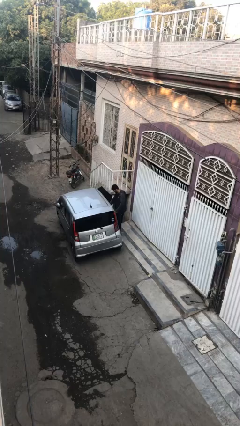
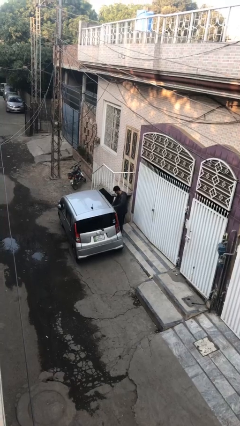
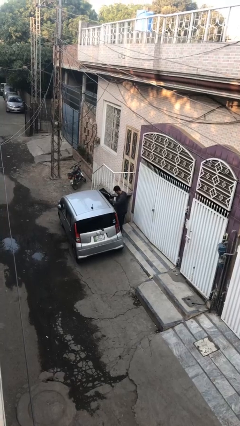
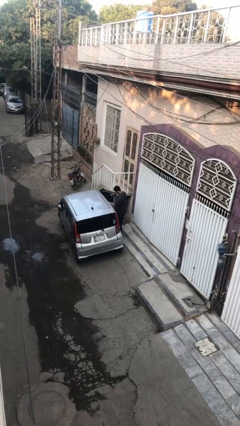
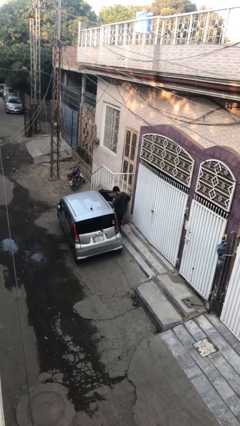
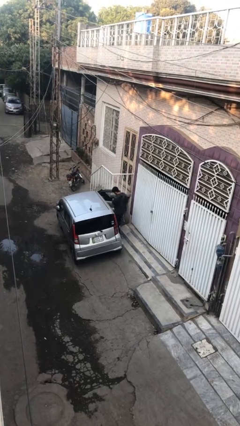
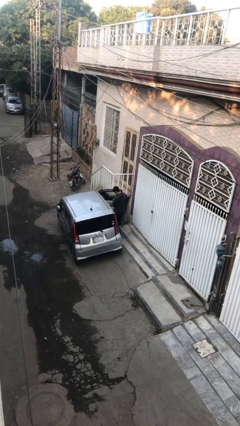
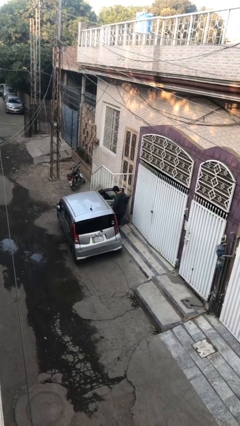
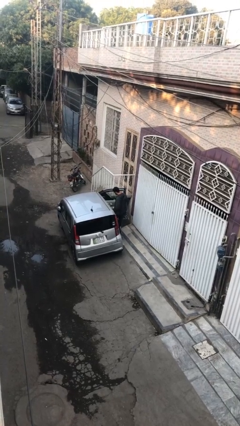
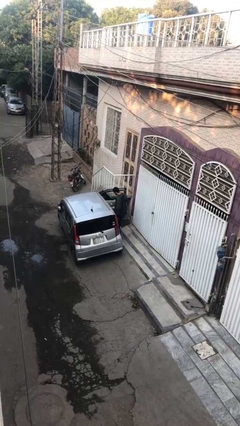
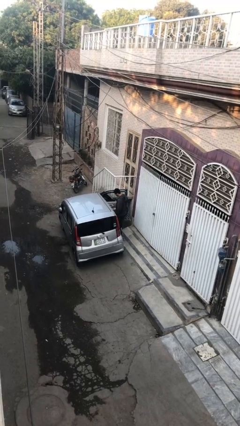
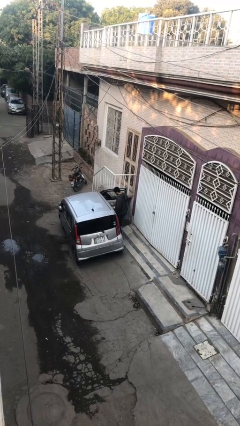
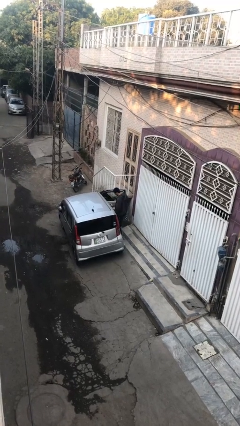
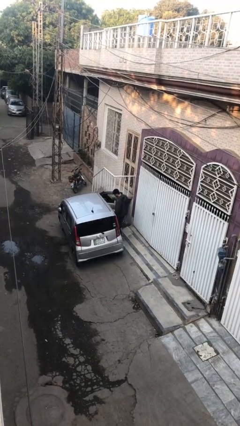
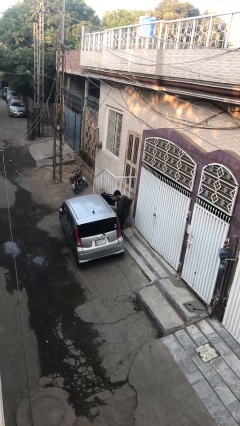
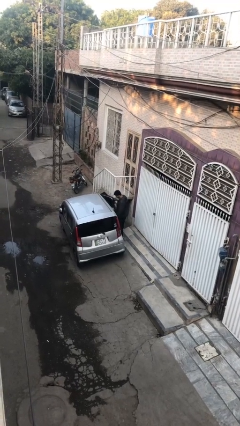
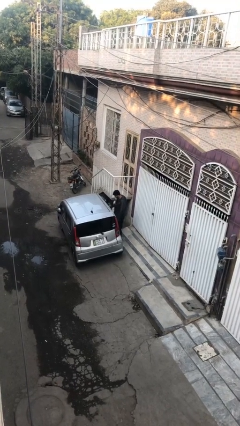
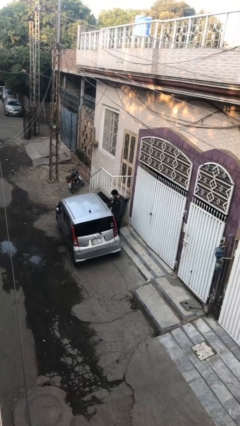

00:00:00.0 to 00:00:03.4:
person opens car door

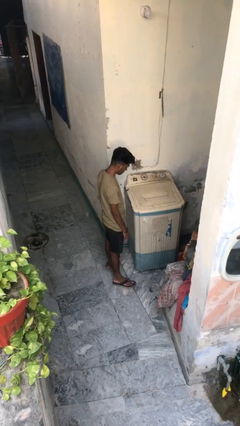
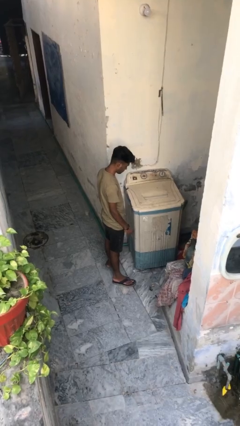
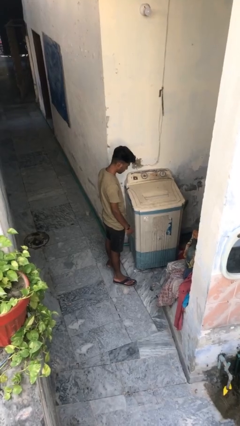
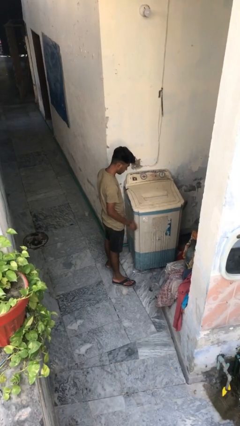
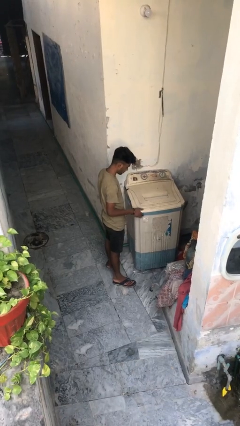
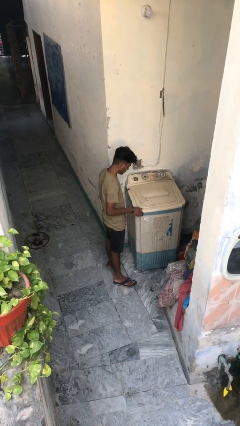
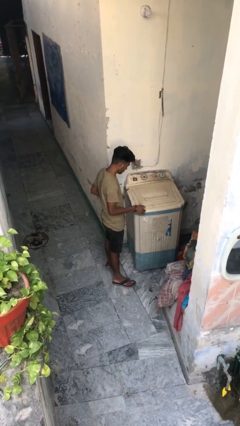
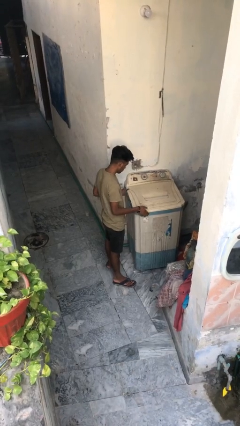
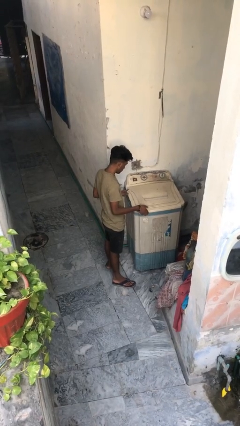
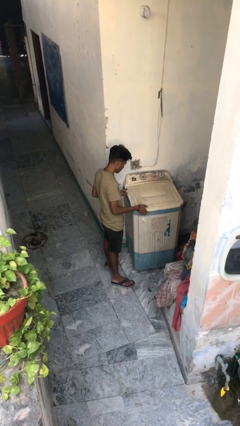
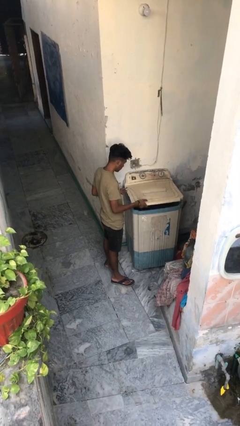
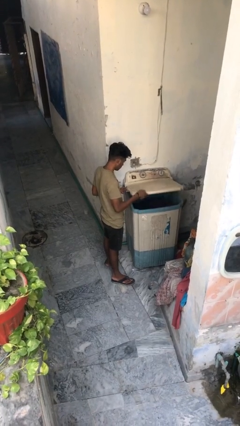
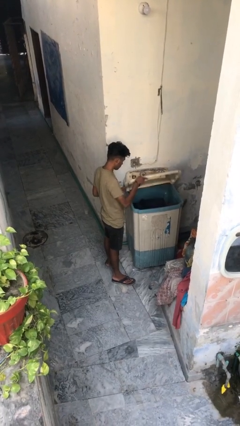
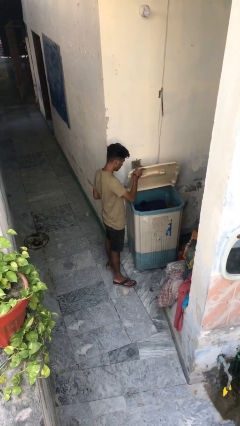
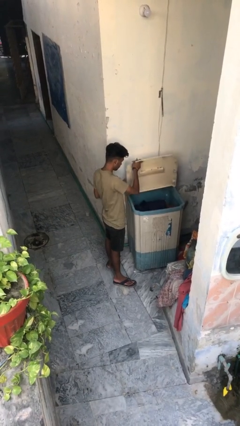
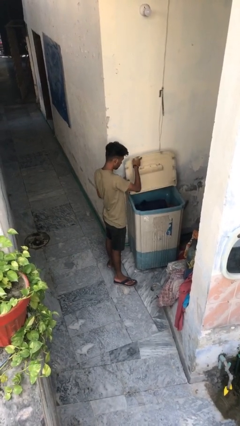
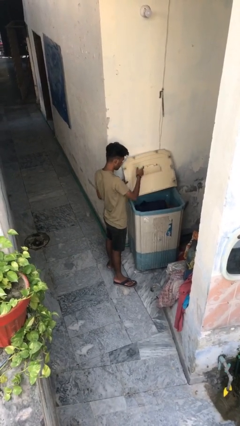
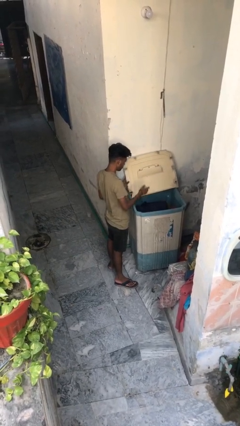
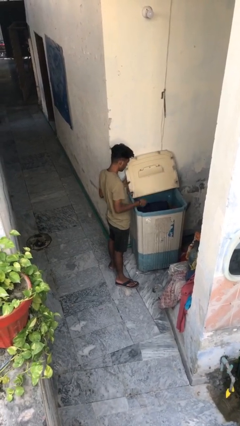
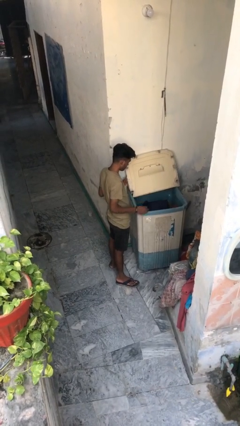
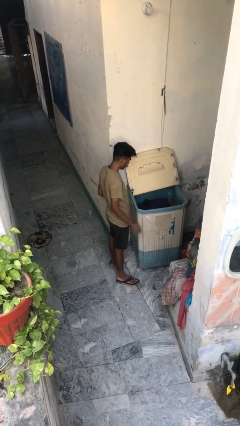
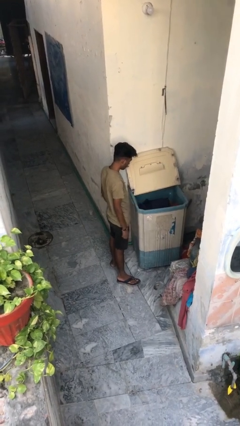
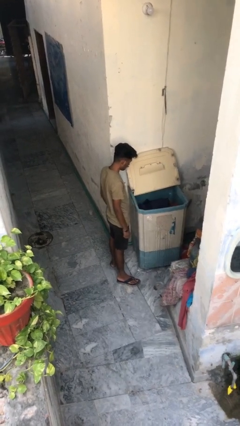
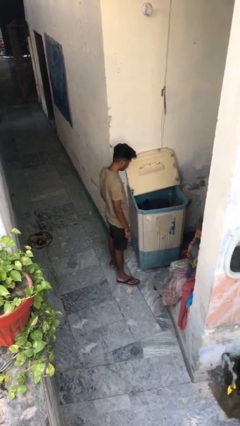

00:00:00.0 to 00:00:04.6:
person opens clothes washer

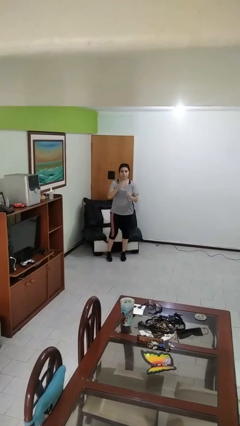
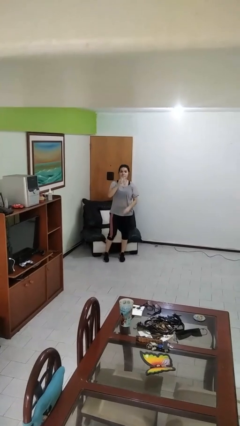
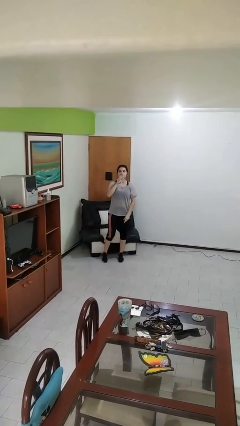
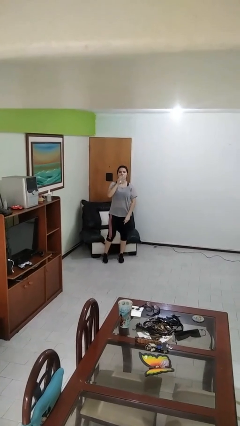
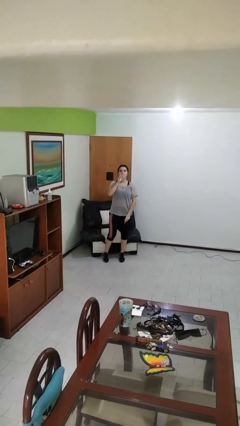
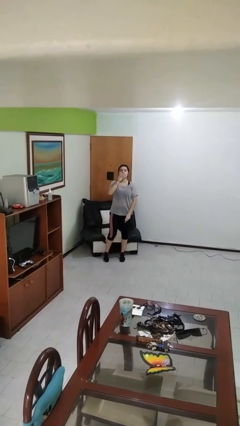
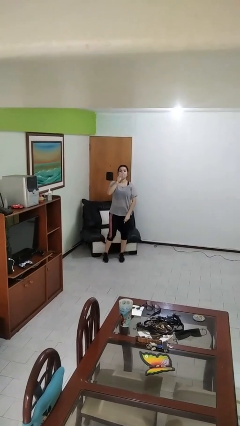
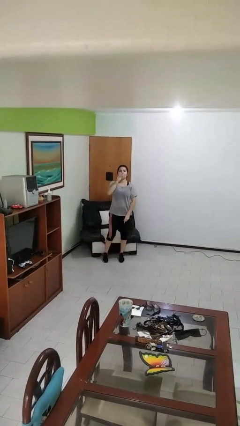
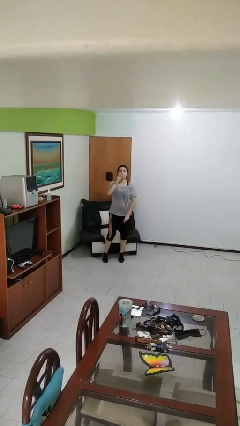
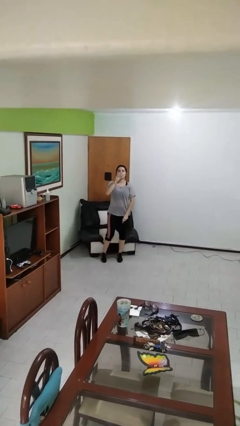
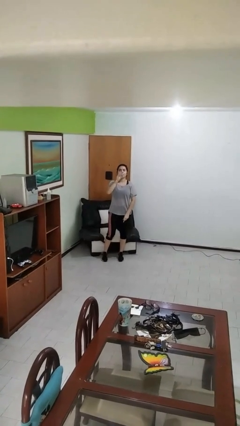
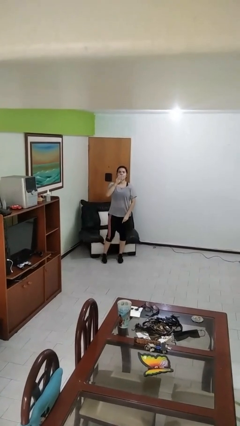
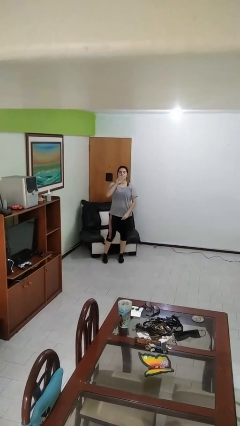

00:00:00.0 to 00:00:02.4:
person drinks from bottle

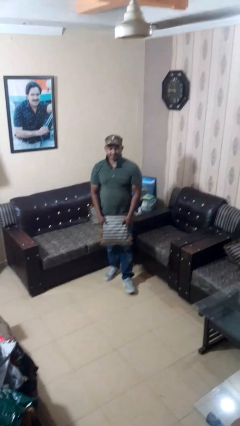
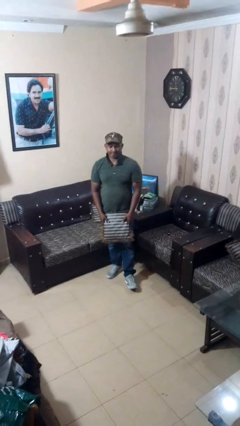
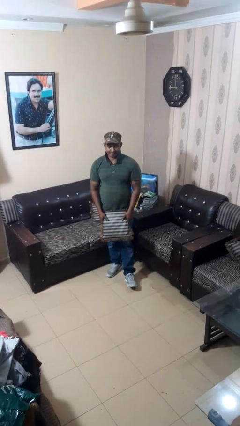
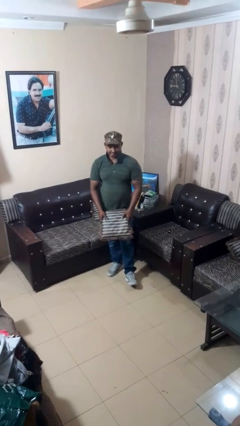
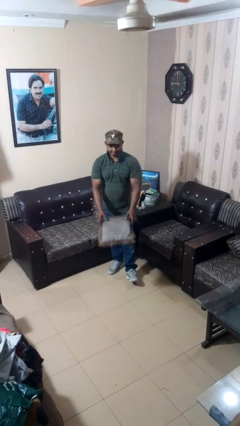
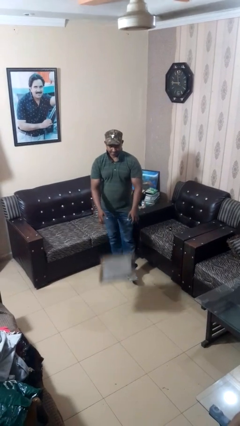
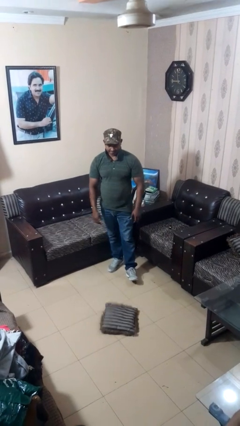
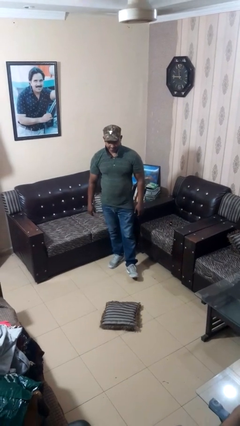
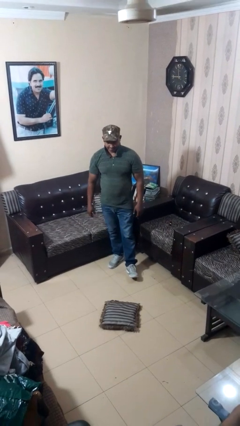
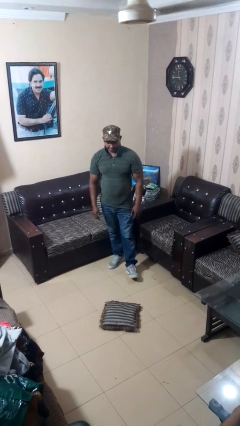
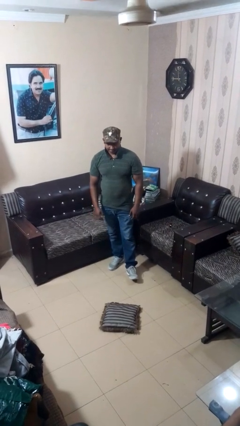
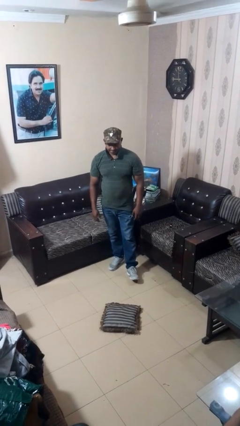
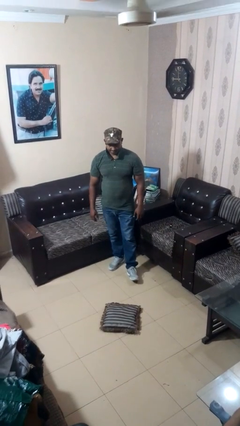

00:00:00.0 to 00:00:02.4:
person throws object to ground

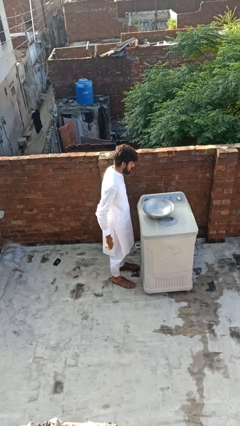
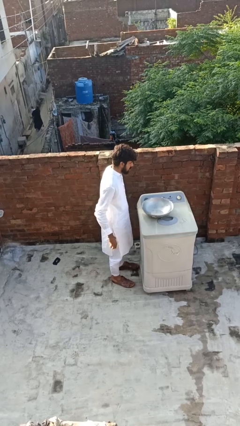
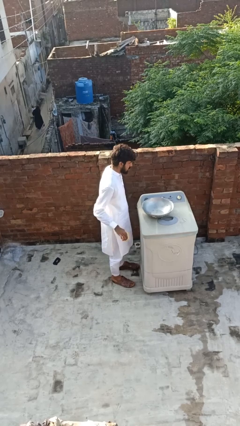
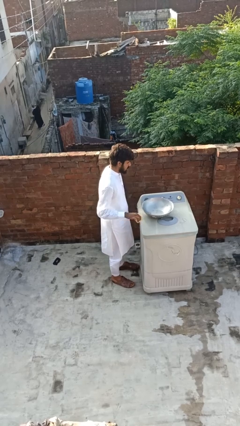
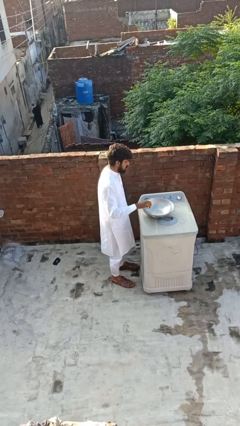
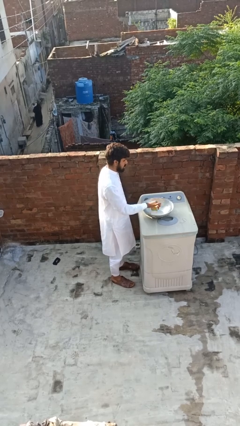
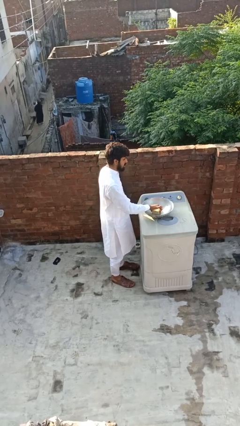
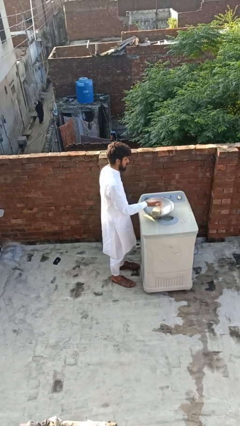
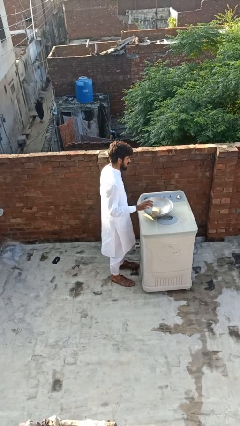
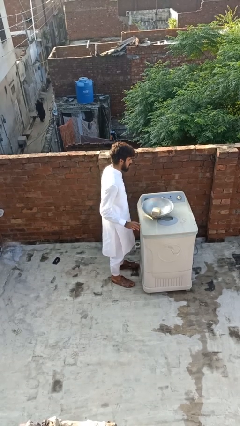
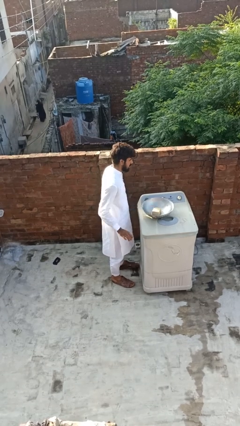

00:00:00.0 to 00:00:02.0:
person pours into bowl

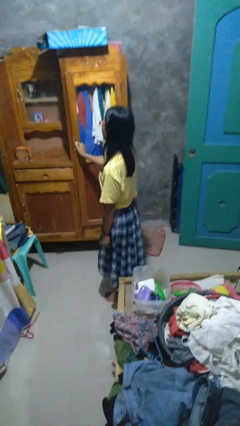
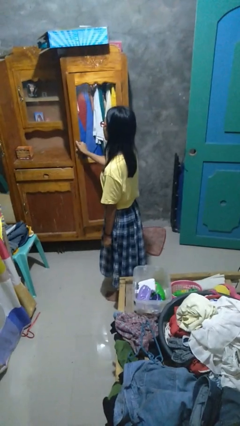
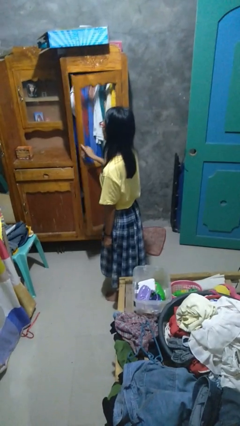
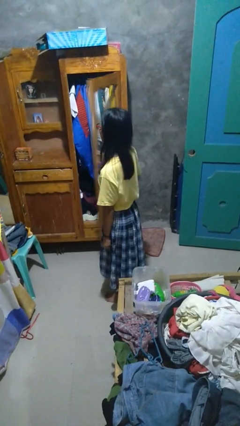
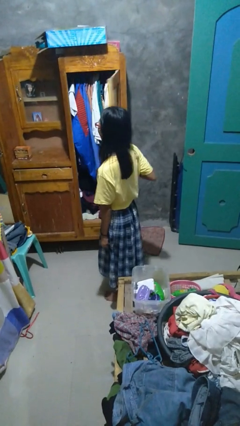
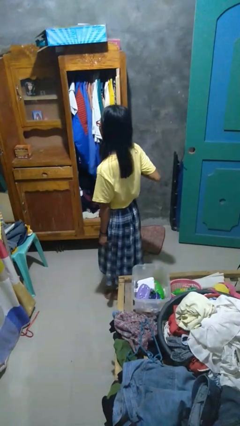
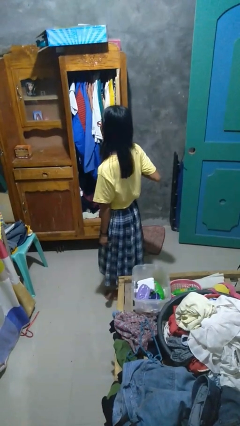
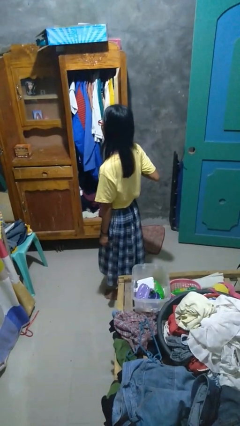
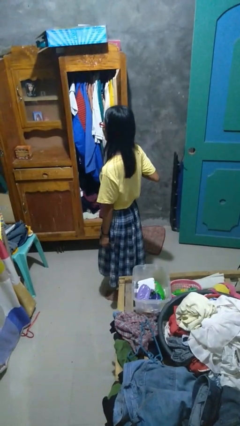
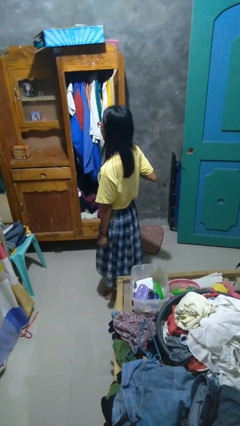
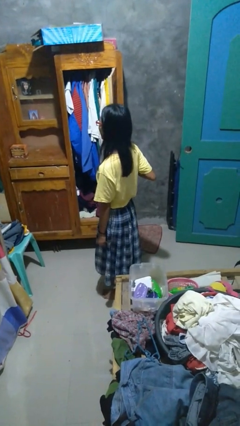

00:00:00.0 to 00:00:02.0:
person opens closet door

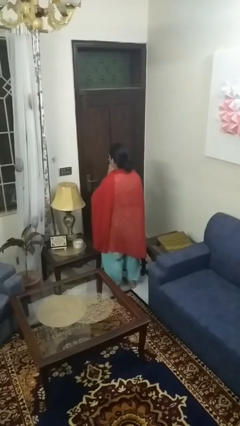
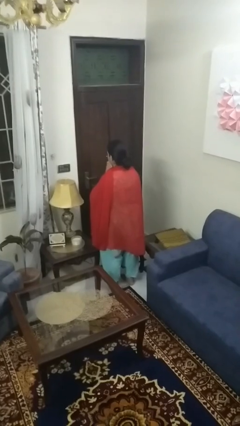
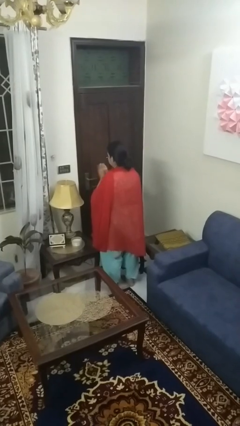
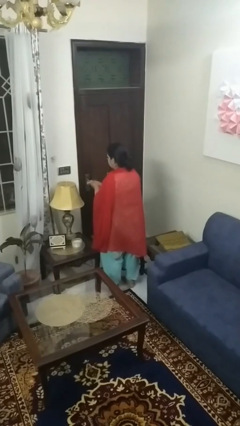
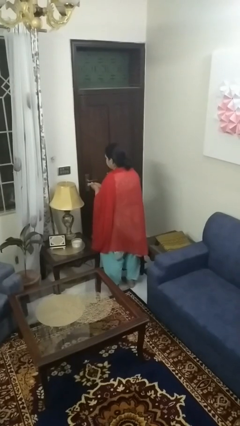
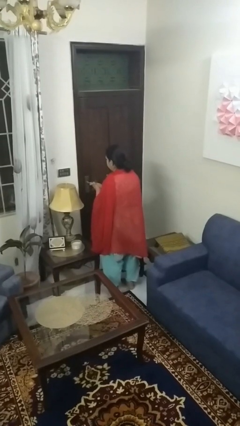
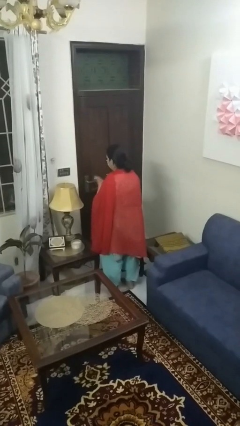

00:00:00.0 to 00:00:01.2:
person swats bug
